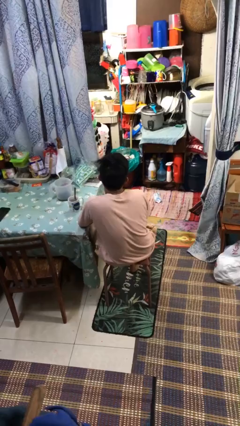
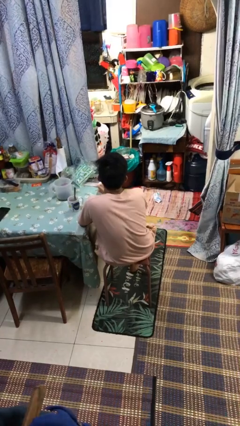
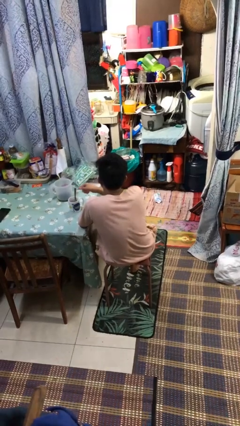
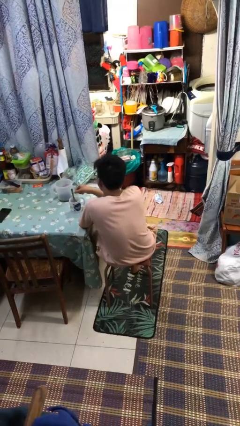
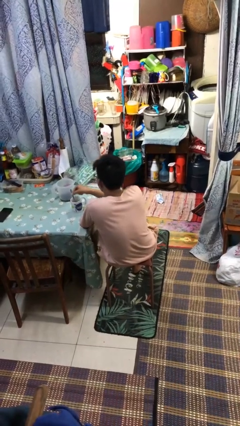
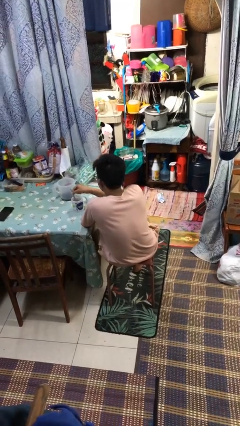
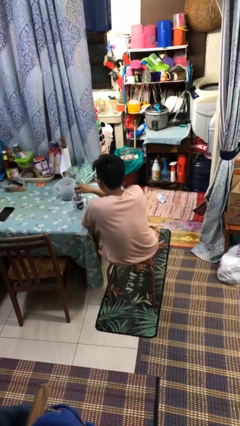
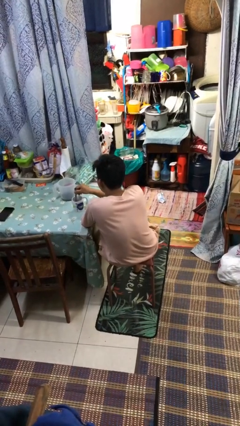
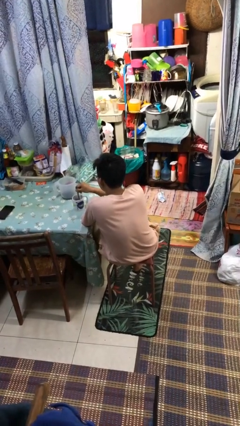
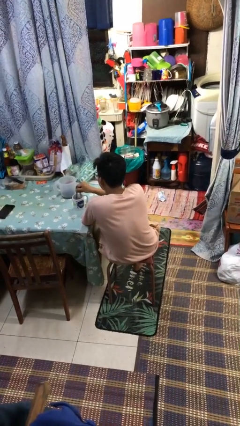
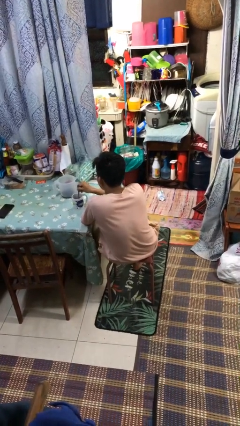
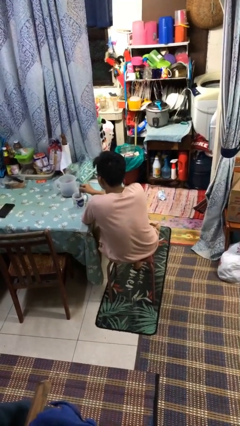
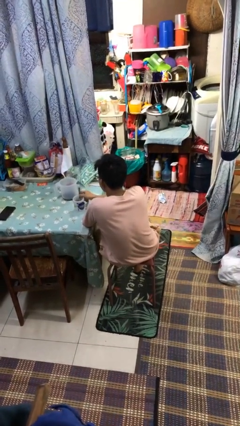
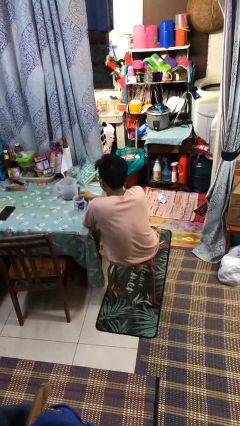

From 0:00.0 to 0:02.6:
person stirs mug

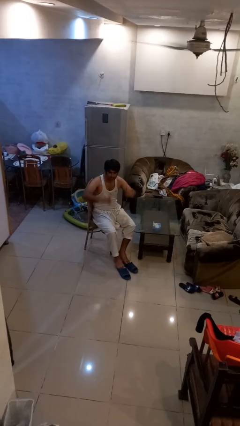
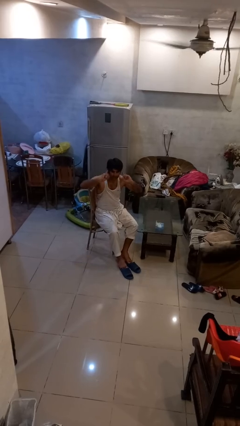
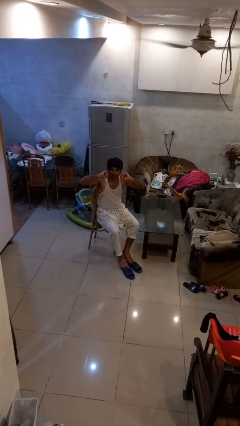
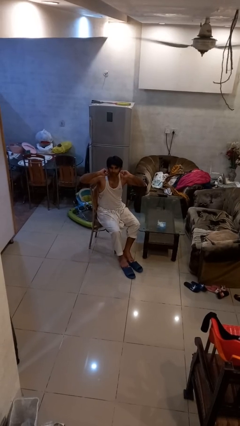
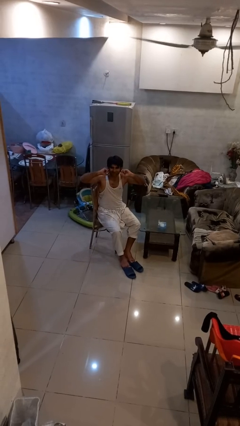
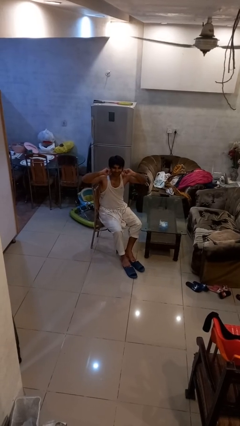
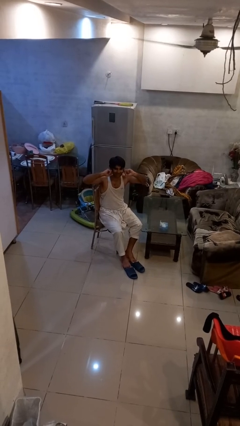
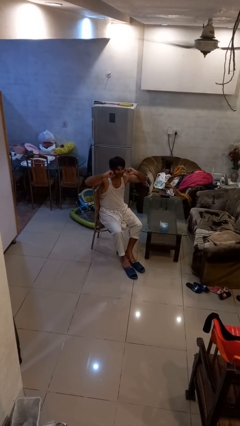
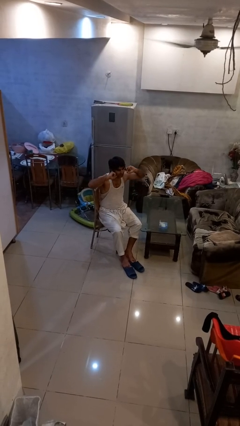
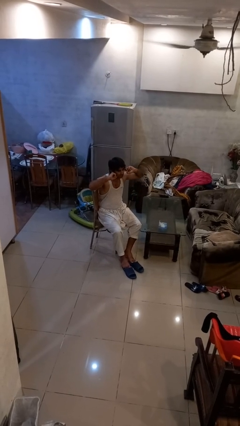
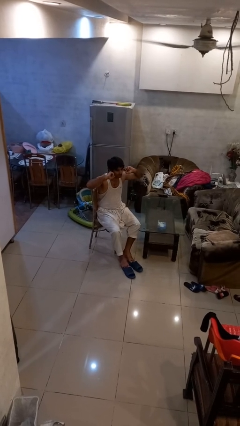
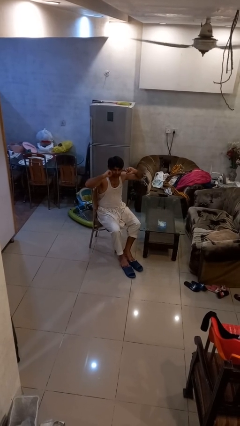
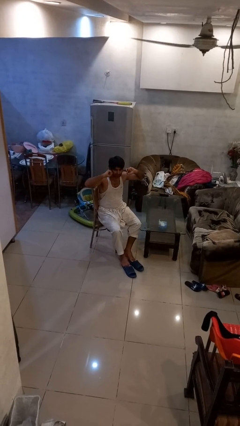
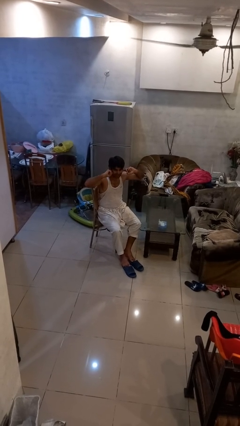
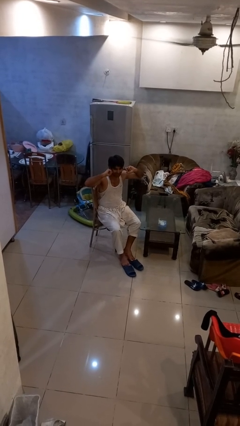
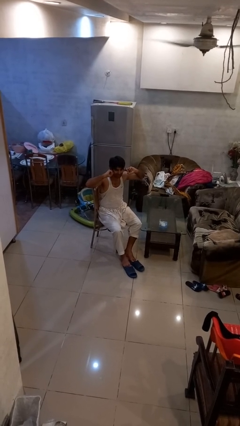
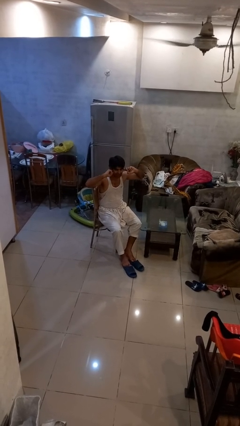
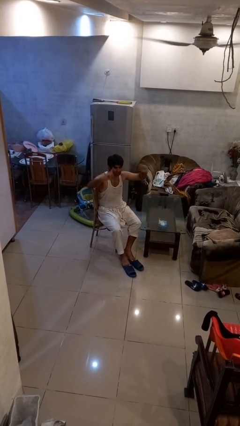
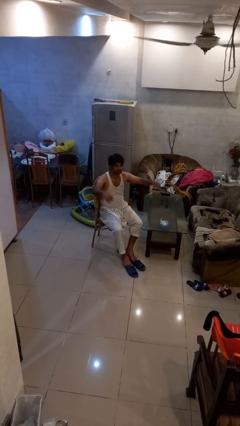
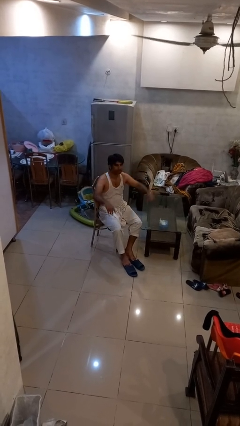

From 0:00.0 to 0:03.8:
person puts fingers in ear

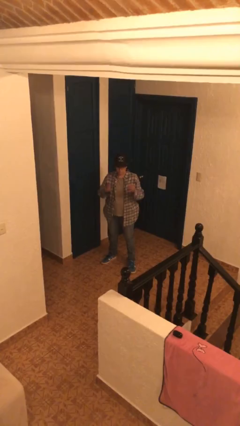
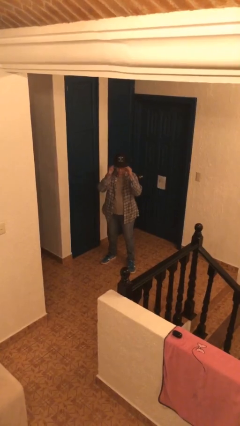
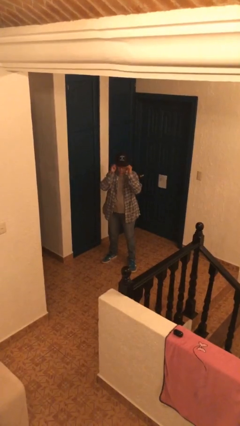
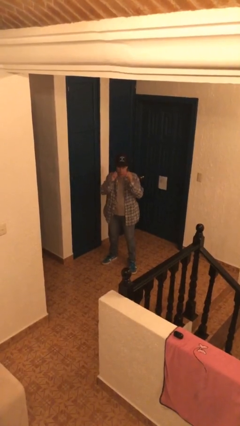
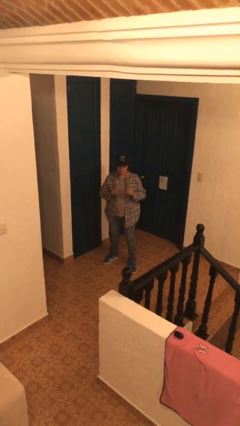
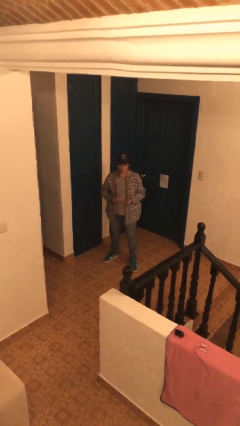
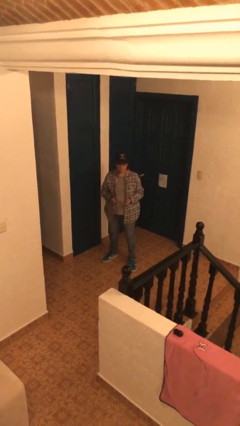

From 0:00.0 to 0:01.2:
person takes off glasses

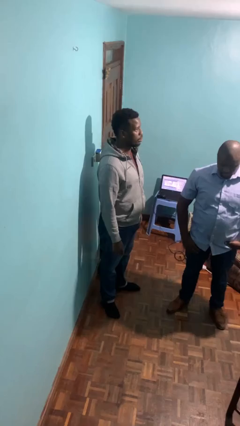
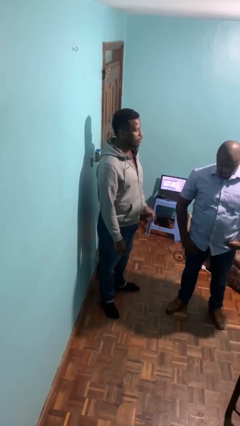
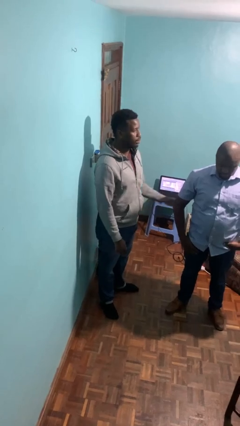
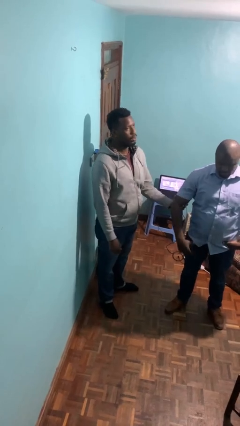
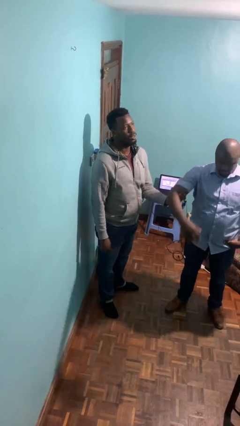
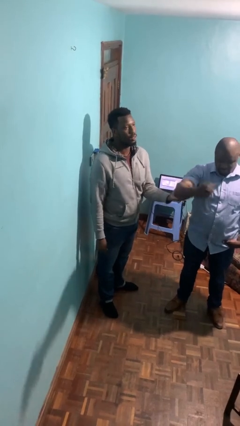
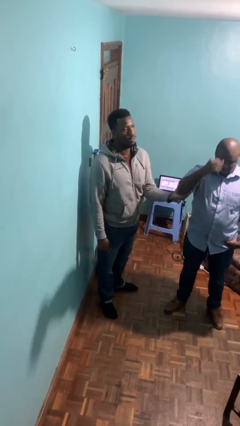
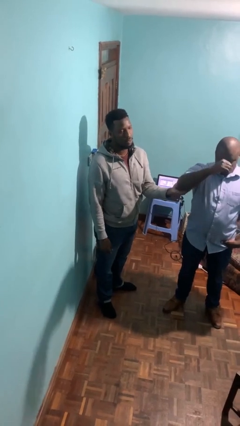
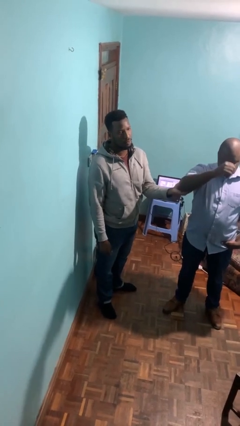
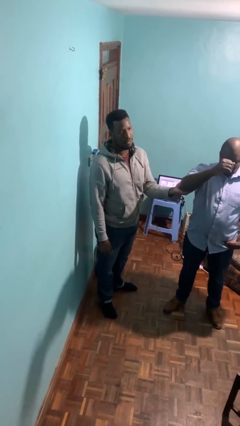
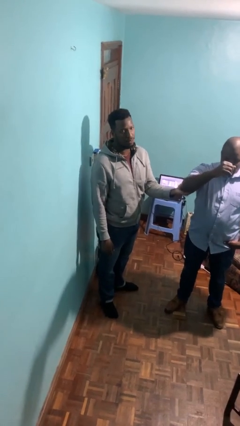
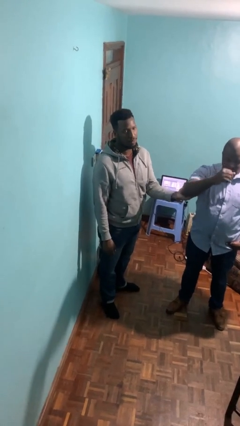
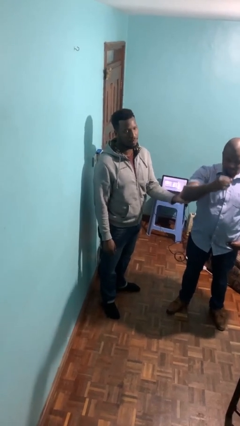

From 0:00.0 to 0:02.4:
person grabs person by bicep

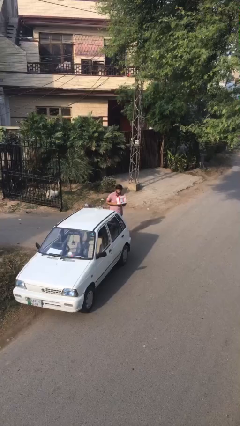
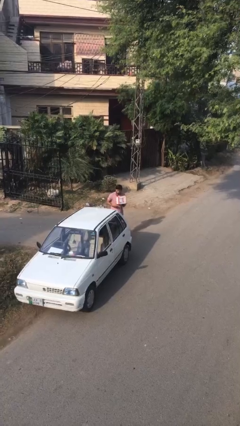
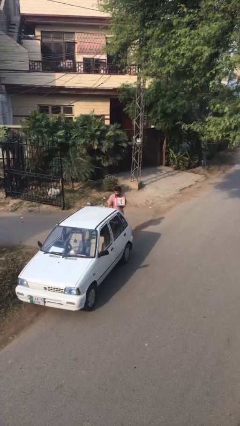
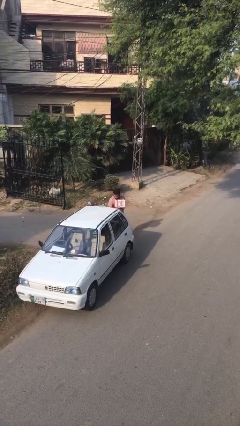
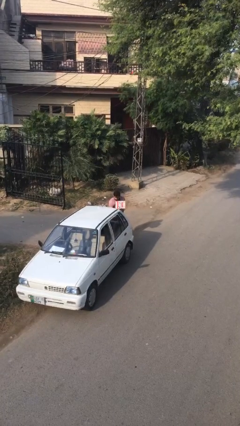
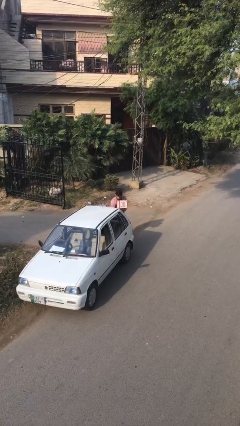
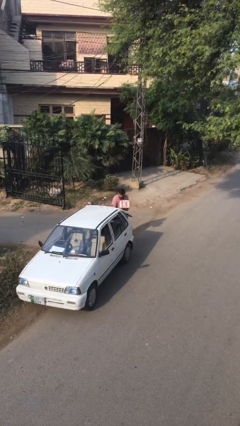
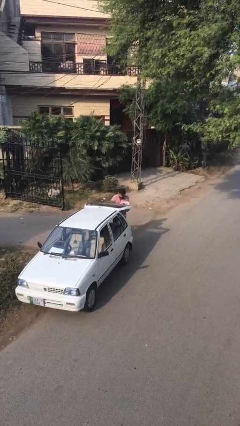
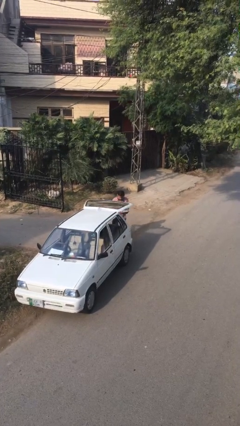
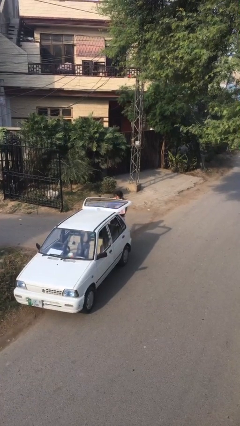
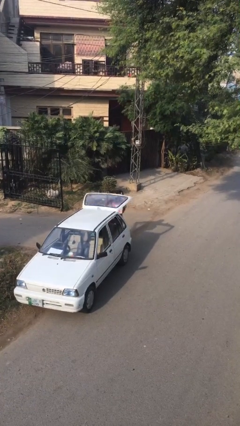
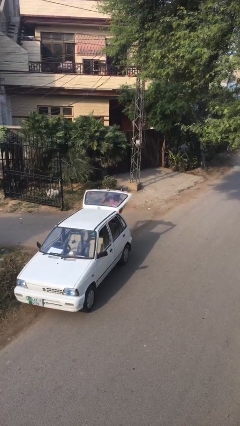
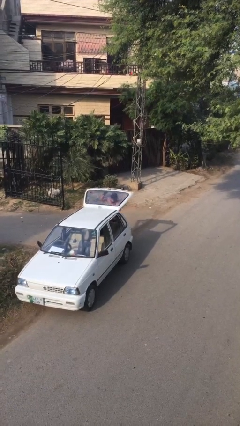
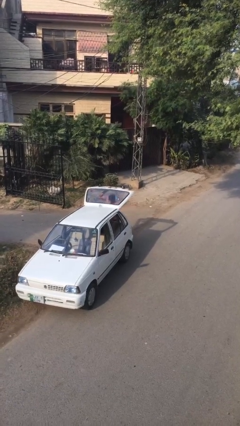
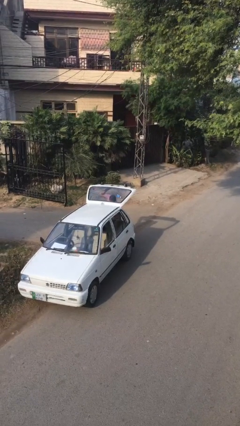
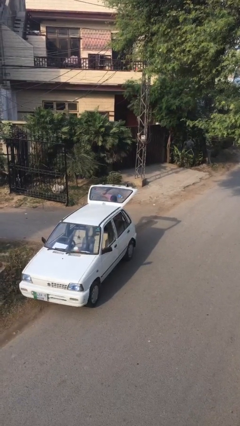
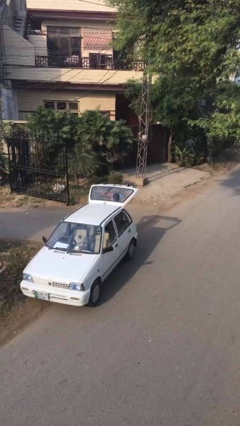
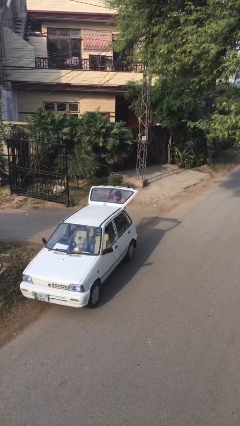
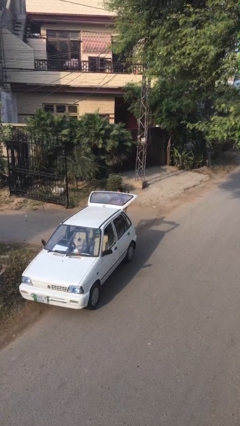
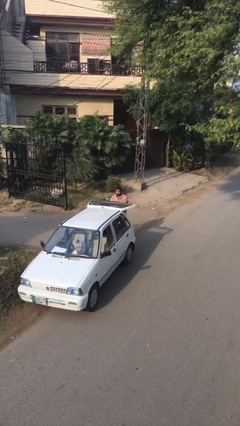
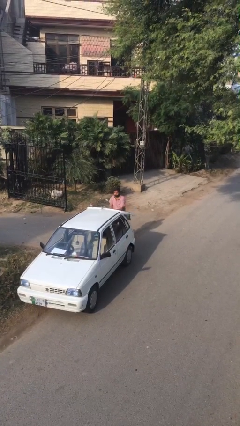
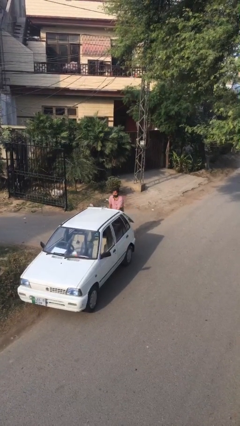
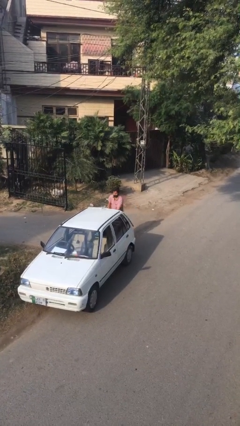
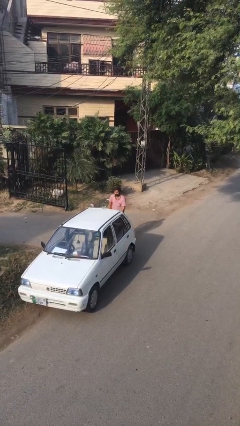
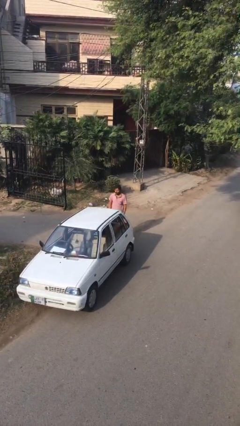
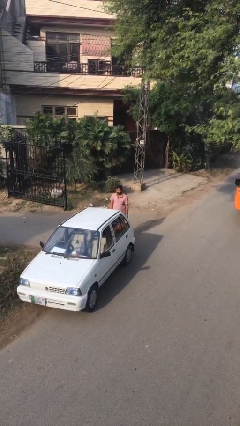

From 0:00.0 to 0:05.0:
person loads car

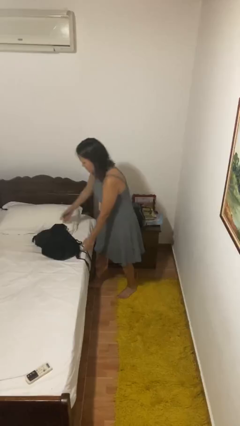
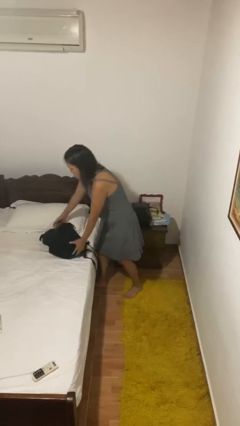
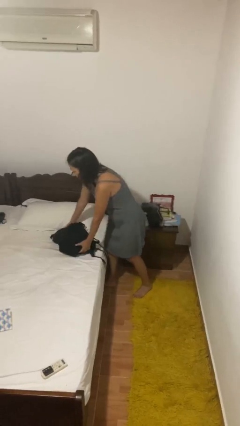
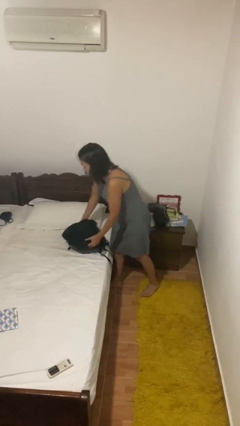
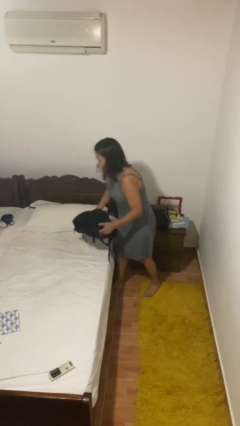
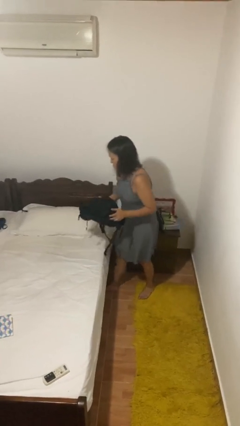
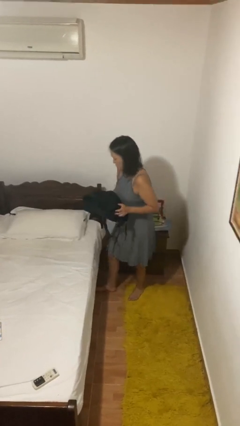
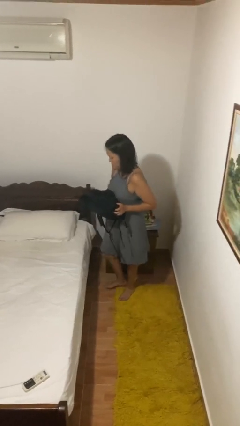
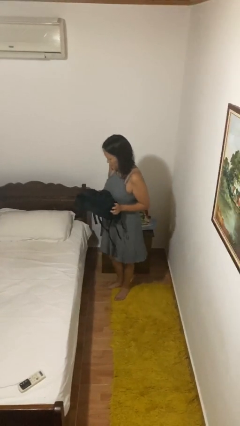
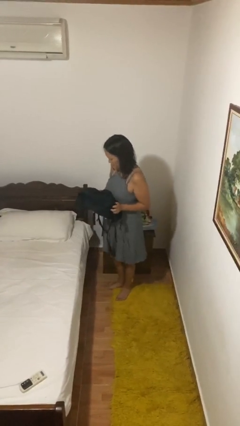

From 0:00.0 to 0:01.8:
person picks up object from bed

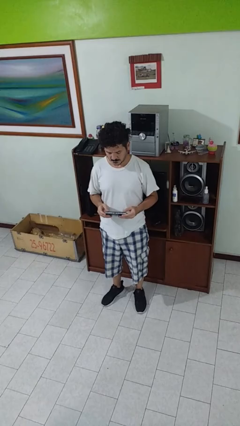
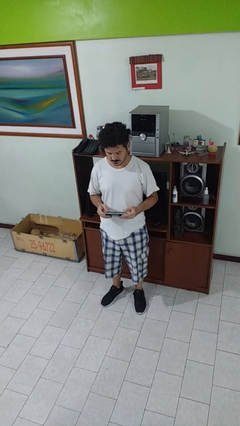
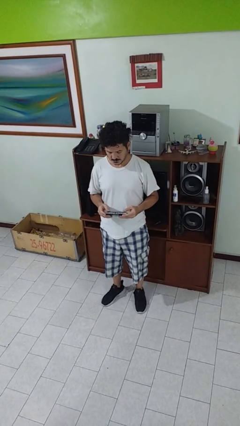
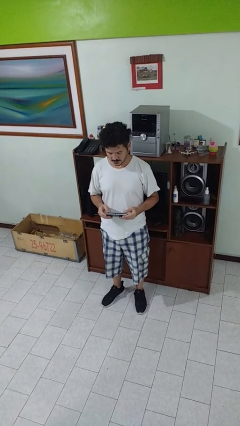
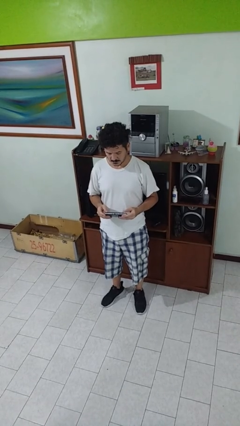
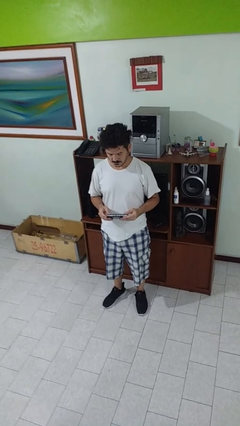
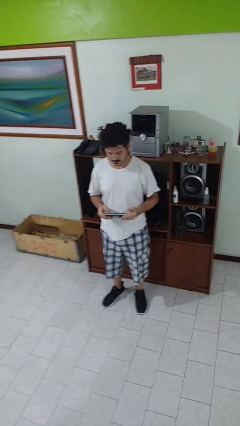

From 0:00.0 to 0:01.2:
person interacts with handheld game
